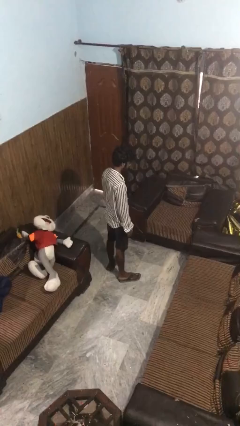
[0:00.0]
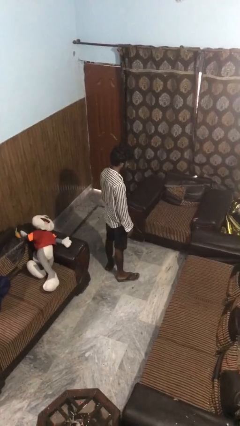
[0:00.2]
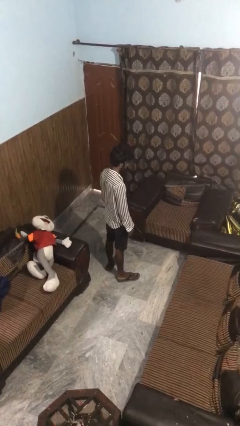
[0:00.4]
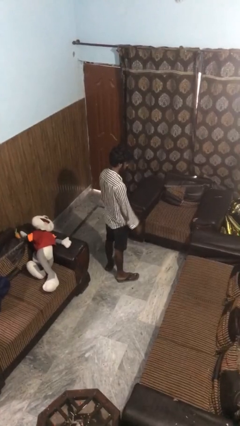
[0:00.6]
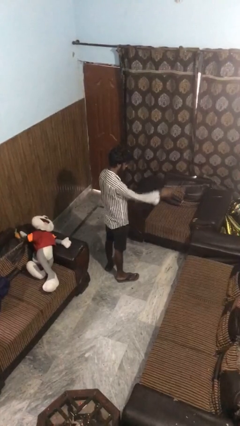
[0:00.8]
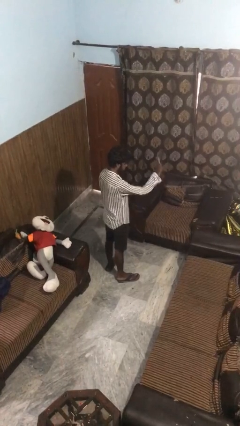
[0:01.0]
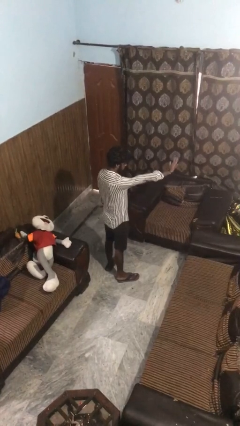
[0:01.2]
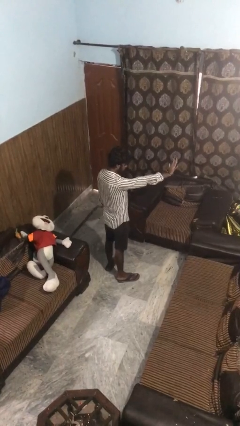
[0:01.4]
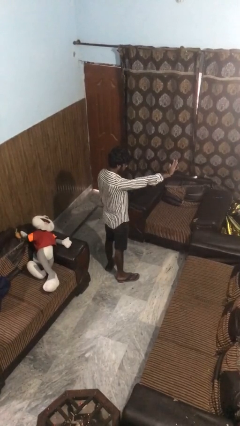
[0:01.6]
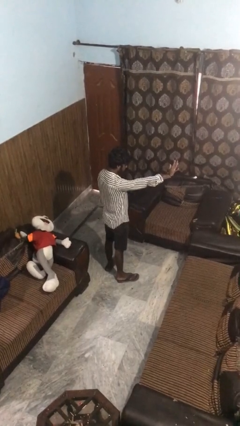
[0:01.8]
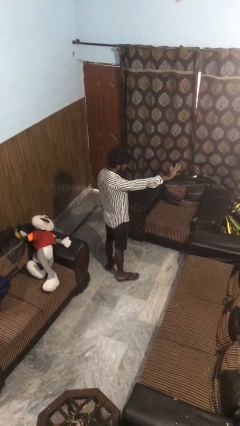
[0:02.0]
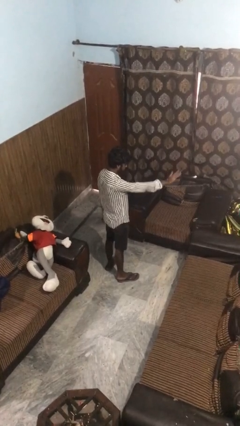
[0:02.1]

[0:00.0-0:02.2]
person gestures stop

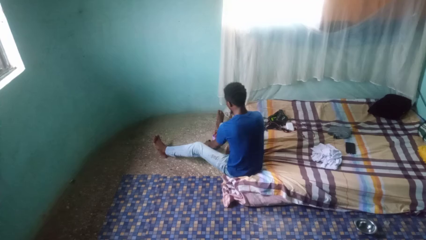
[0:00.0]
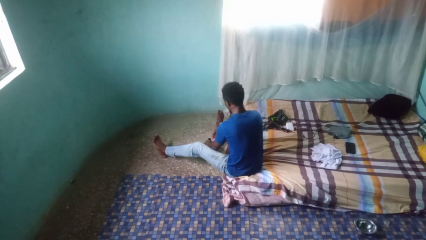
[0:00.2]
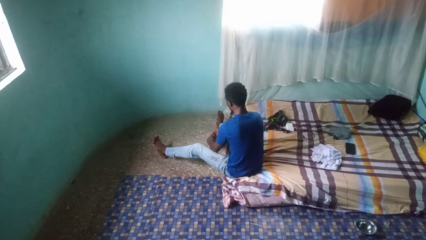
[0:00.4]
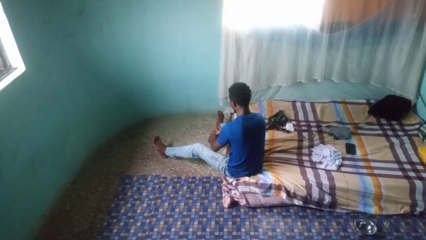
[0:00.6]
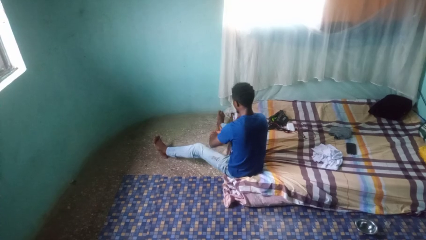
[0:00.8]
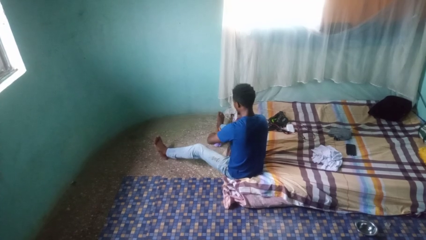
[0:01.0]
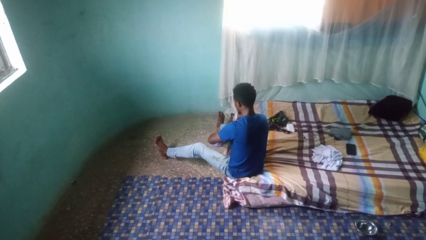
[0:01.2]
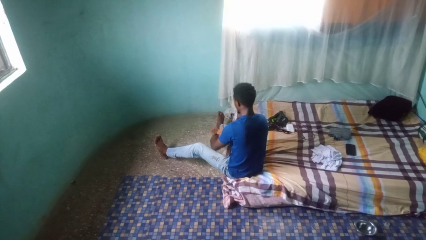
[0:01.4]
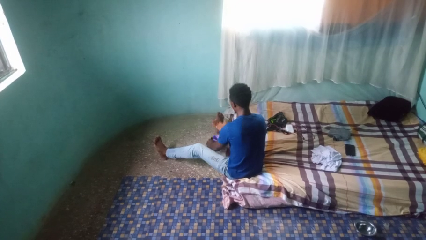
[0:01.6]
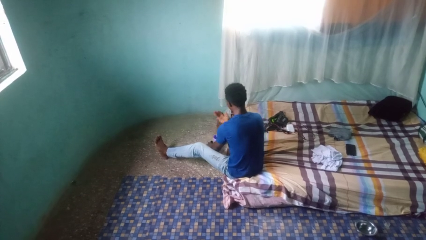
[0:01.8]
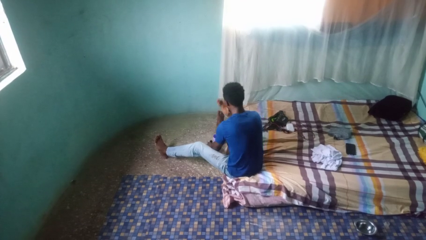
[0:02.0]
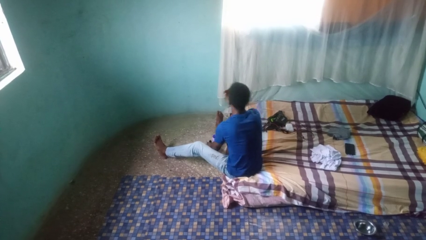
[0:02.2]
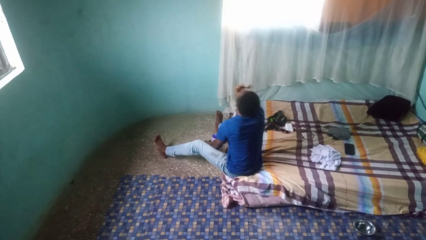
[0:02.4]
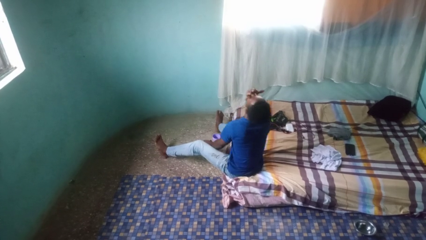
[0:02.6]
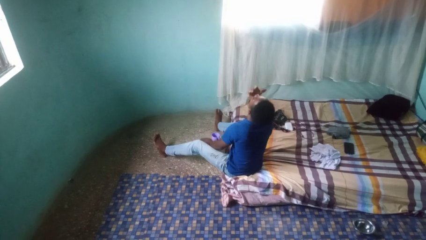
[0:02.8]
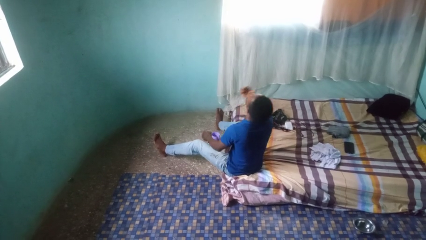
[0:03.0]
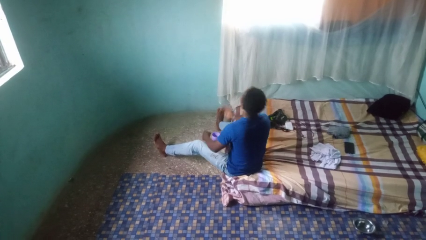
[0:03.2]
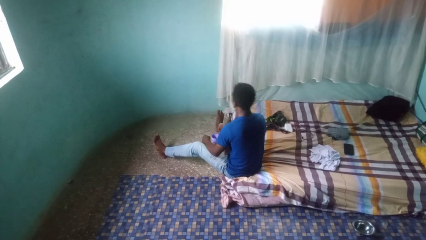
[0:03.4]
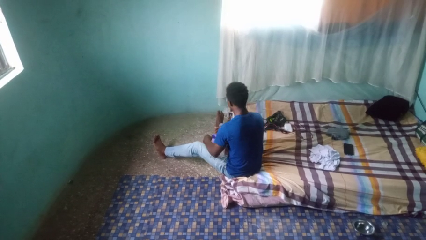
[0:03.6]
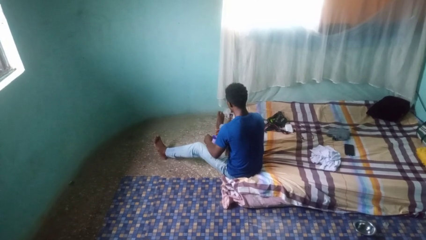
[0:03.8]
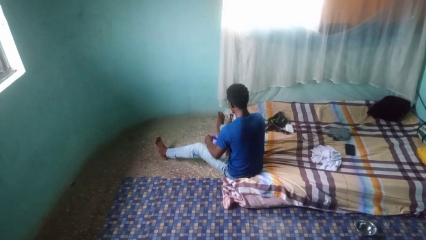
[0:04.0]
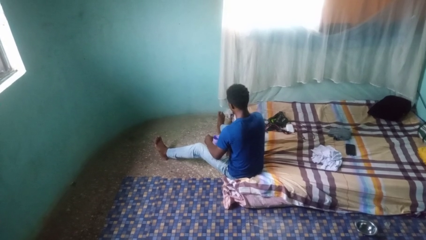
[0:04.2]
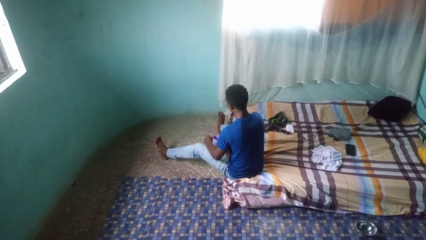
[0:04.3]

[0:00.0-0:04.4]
person takes medicine pills

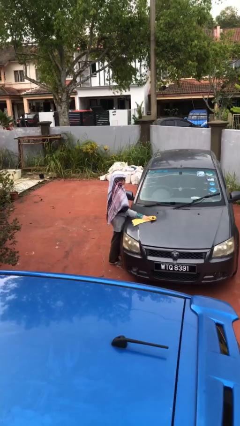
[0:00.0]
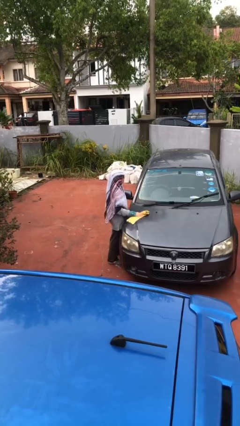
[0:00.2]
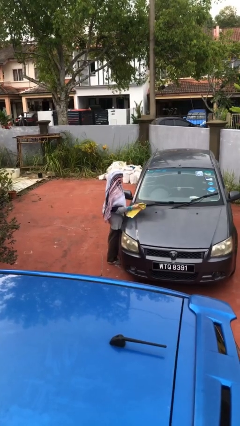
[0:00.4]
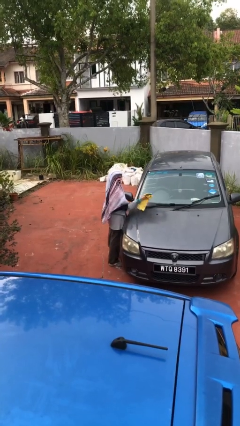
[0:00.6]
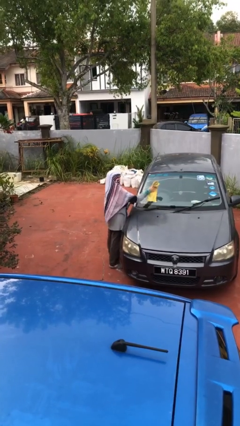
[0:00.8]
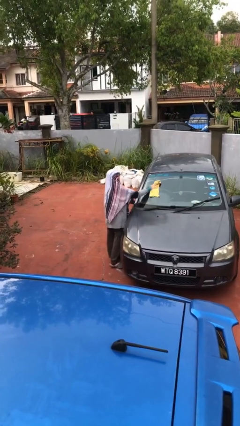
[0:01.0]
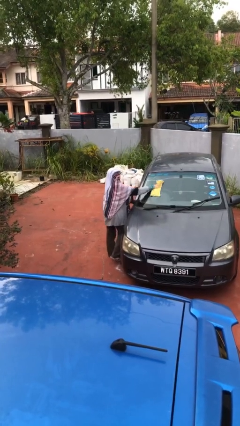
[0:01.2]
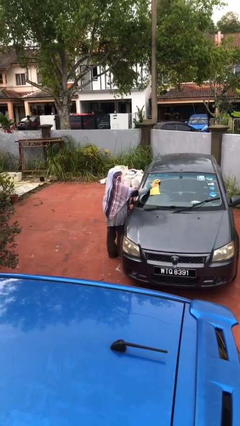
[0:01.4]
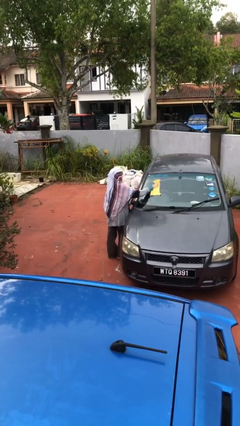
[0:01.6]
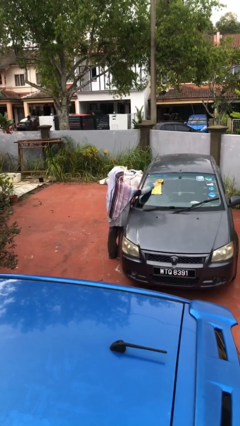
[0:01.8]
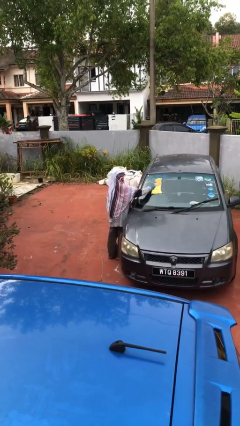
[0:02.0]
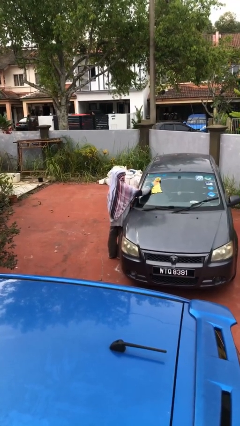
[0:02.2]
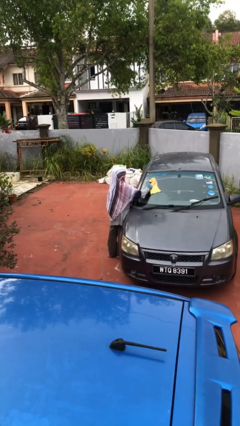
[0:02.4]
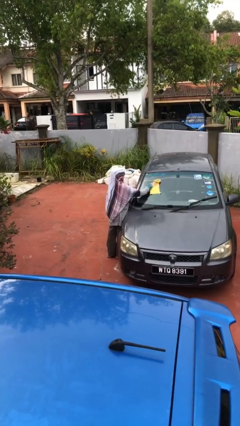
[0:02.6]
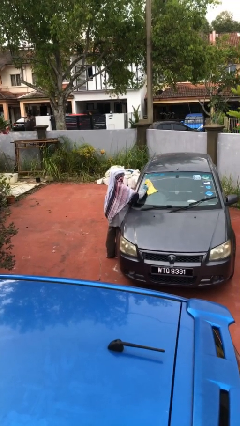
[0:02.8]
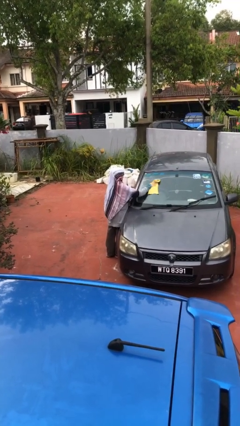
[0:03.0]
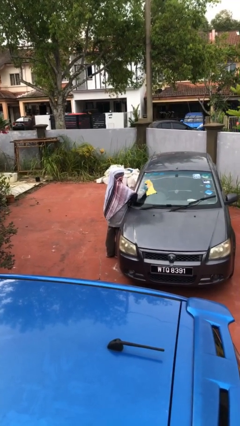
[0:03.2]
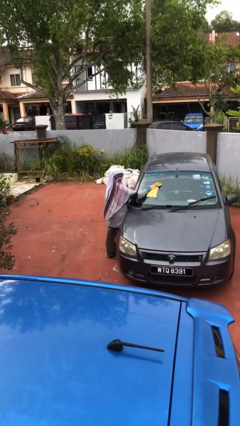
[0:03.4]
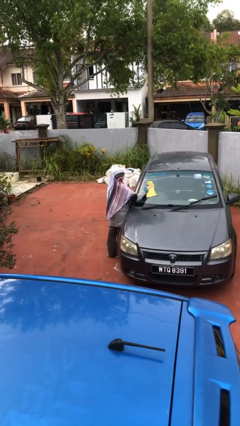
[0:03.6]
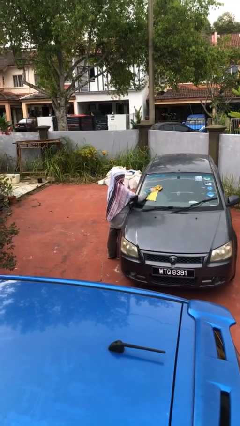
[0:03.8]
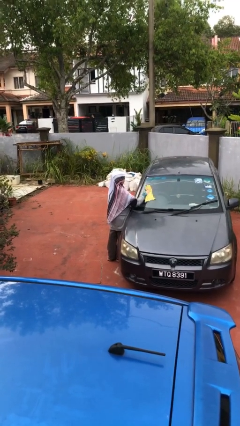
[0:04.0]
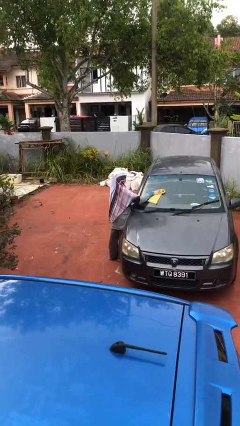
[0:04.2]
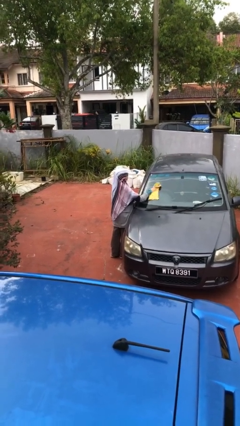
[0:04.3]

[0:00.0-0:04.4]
person polishes car with rag

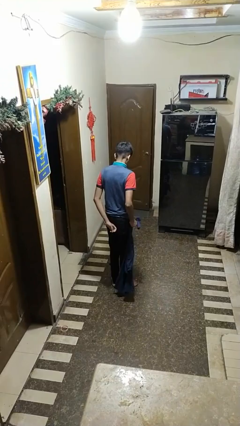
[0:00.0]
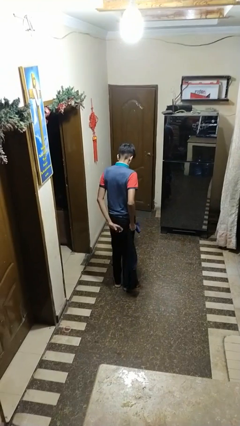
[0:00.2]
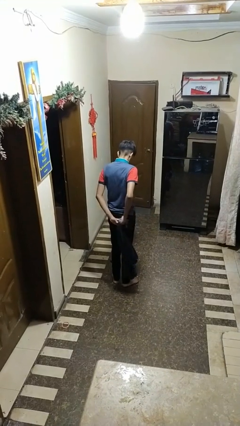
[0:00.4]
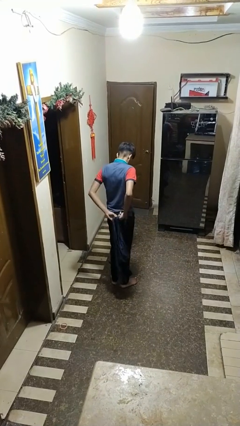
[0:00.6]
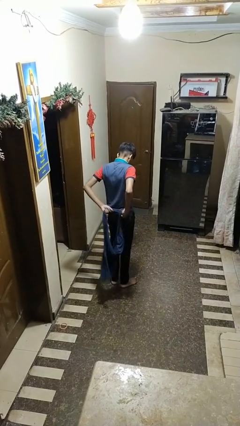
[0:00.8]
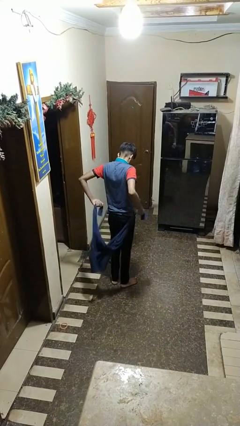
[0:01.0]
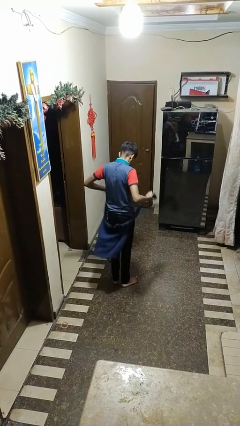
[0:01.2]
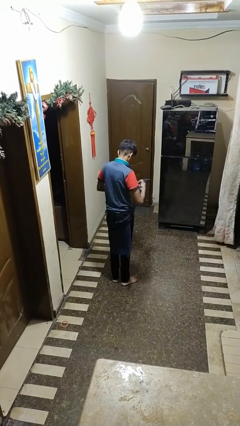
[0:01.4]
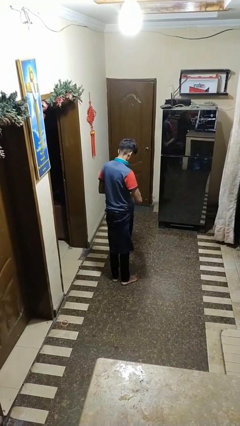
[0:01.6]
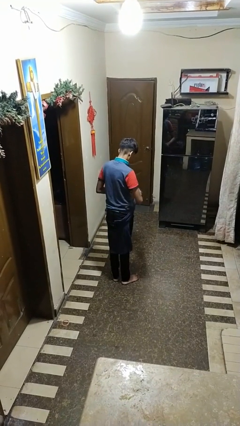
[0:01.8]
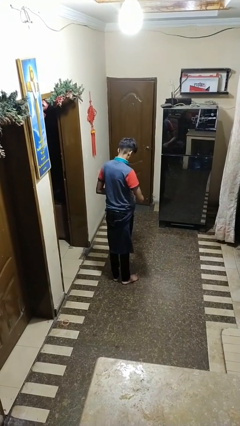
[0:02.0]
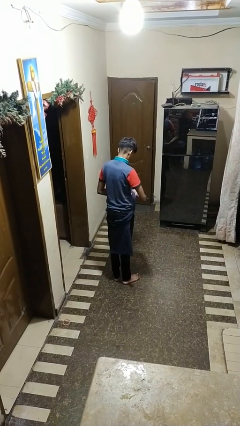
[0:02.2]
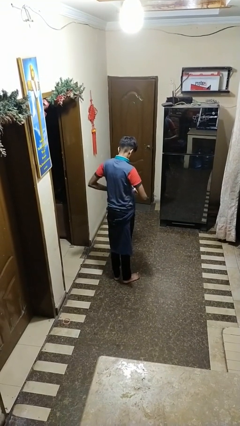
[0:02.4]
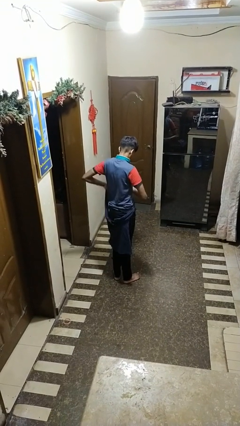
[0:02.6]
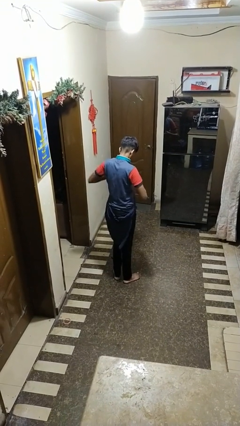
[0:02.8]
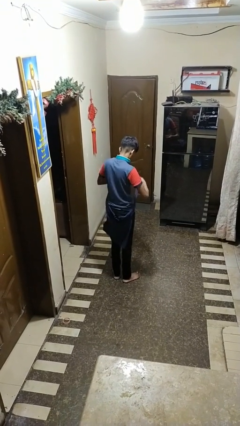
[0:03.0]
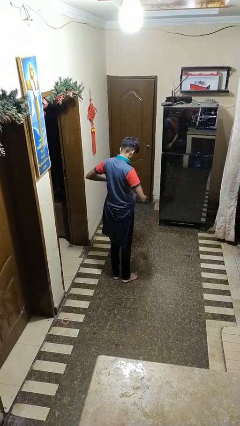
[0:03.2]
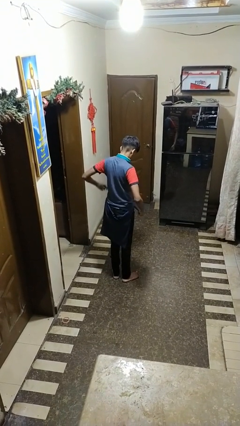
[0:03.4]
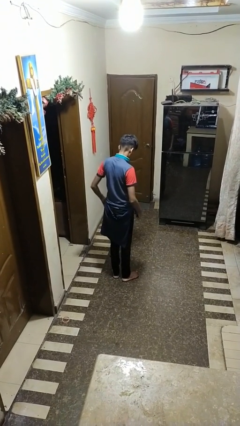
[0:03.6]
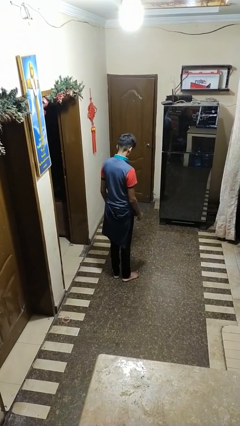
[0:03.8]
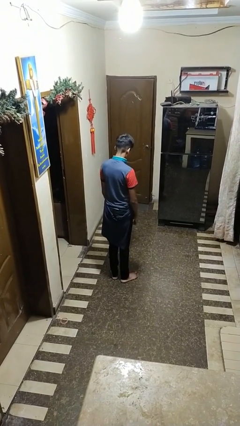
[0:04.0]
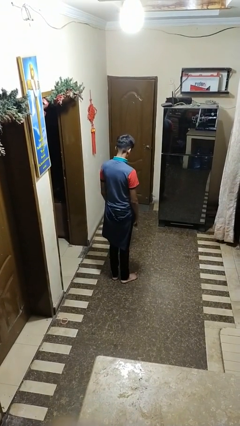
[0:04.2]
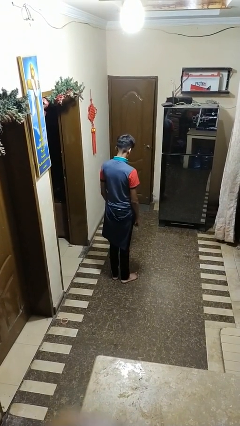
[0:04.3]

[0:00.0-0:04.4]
person ties jacket around waist

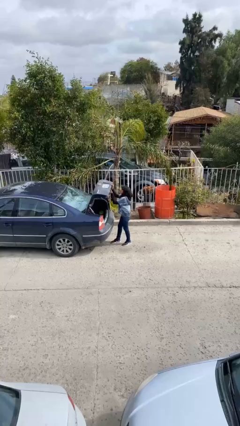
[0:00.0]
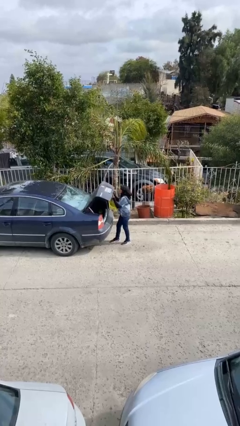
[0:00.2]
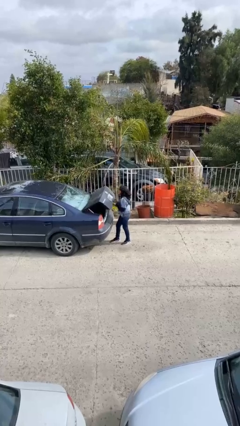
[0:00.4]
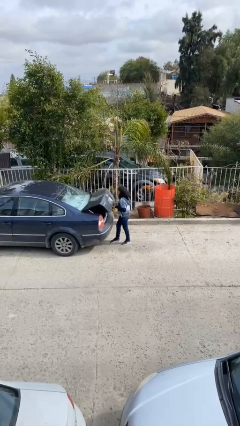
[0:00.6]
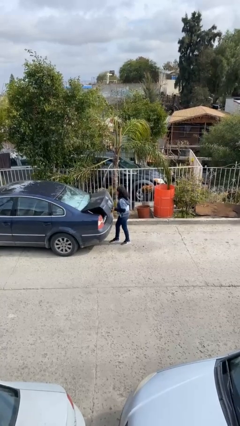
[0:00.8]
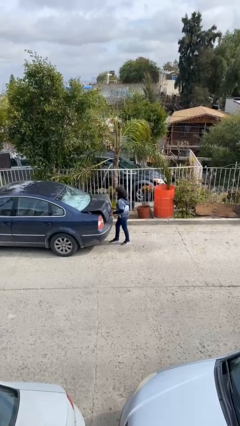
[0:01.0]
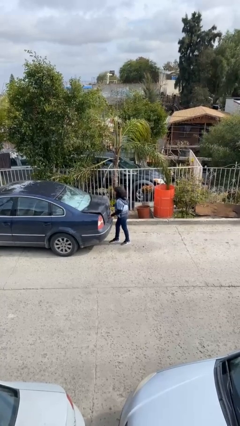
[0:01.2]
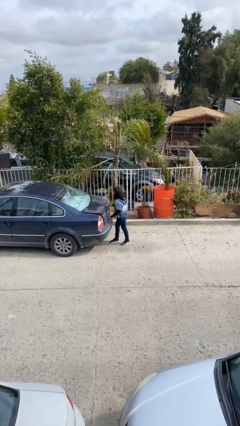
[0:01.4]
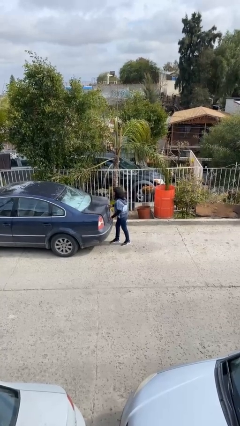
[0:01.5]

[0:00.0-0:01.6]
person closes car trunk

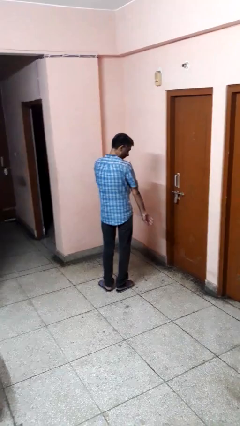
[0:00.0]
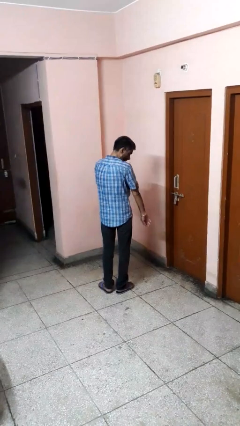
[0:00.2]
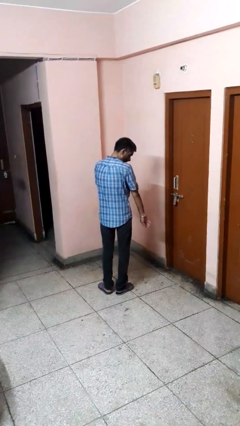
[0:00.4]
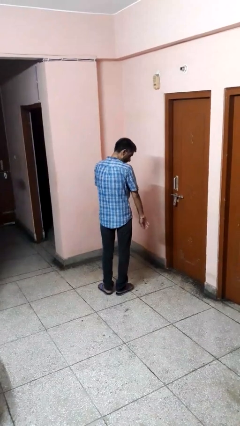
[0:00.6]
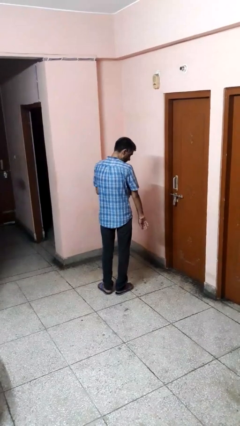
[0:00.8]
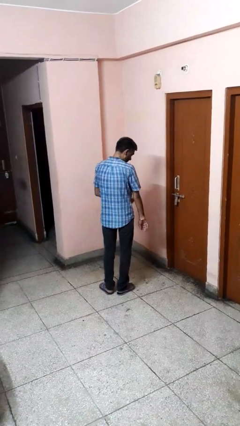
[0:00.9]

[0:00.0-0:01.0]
person swats bug
